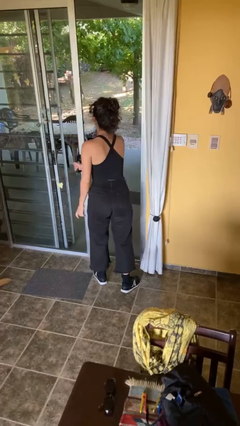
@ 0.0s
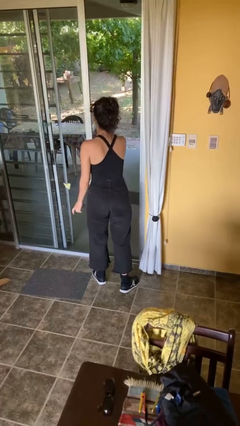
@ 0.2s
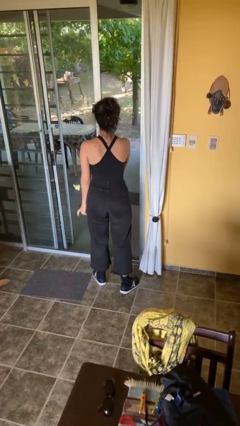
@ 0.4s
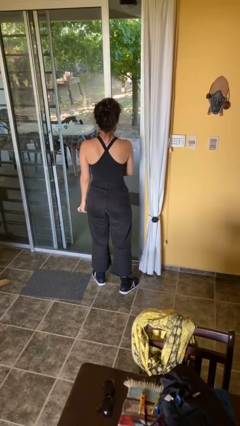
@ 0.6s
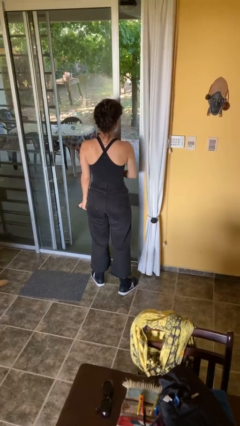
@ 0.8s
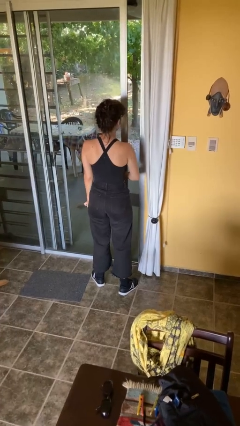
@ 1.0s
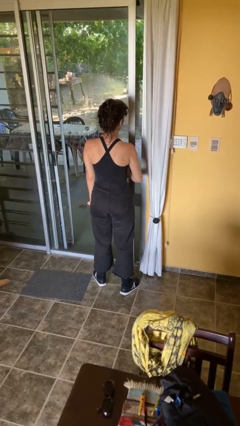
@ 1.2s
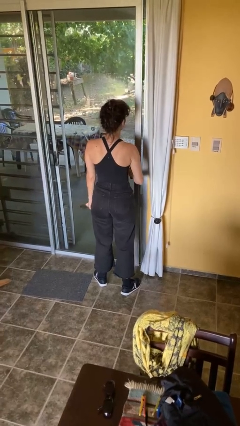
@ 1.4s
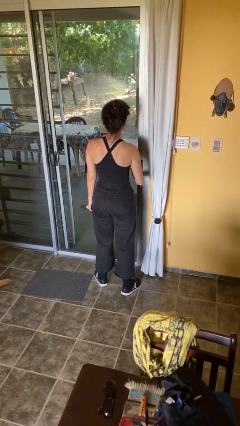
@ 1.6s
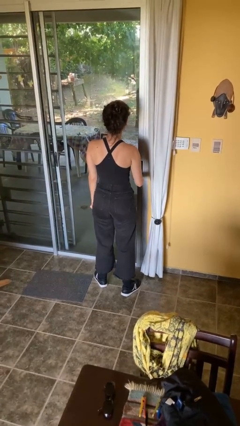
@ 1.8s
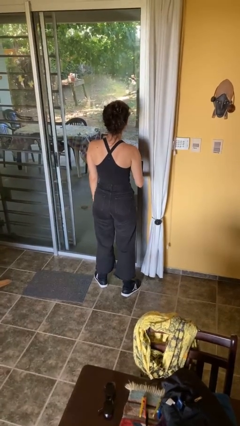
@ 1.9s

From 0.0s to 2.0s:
person closes facility door

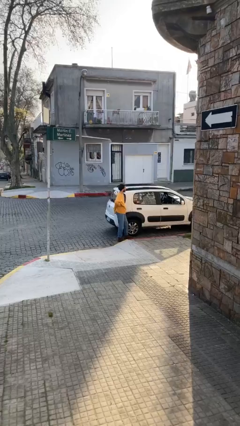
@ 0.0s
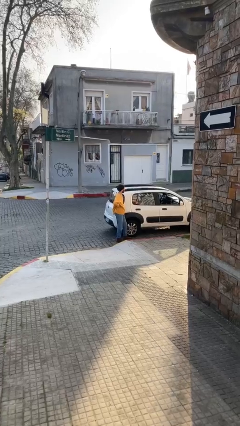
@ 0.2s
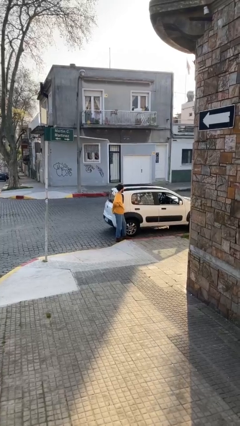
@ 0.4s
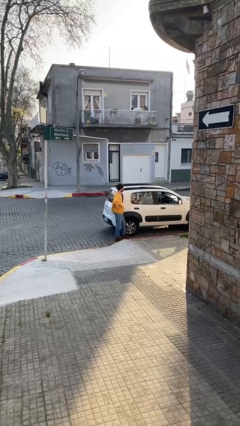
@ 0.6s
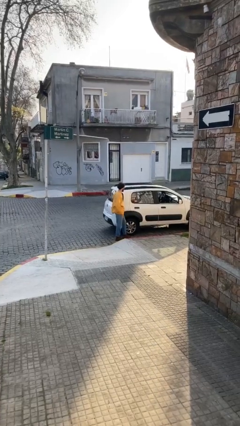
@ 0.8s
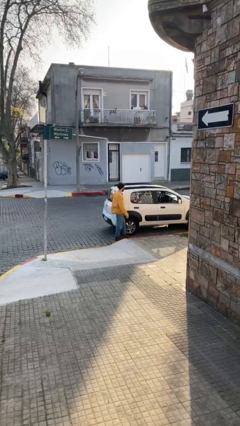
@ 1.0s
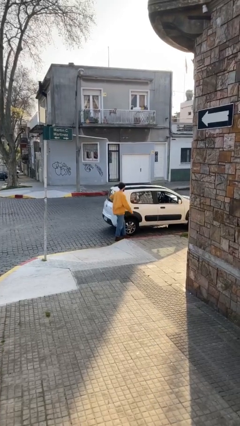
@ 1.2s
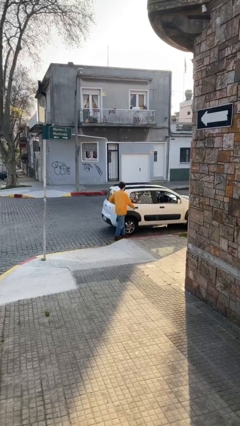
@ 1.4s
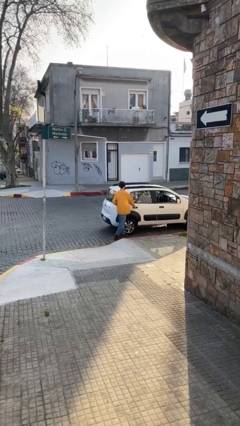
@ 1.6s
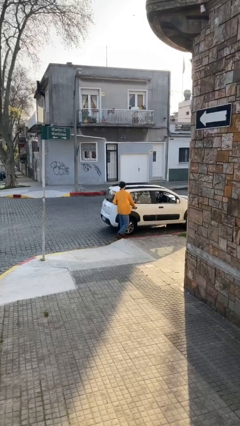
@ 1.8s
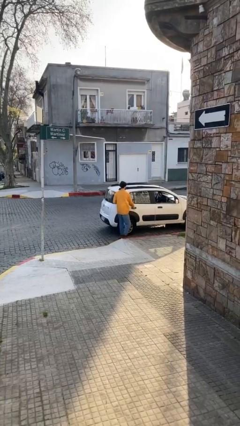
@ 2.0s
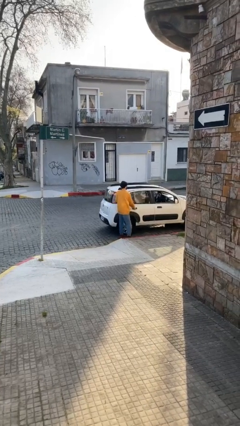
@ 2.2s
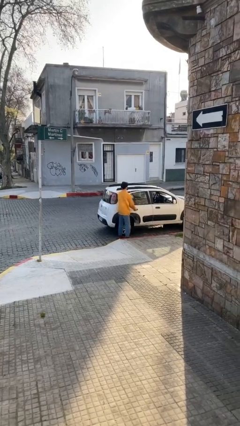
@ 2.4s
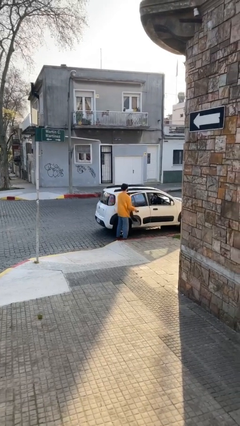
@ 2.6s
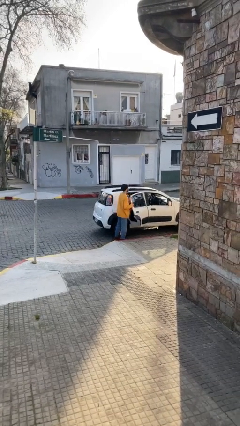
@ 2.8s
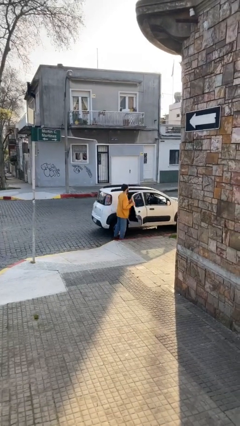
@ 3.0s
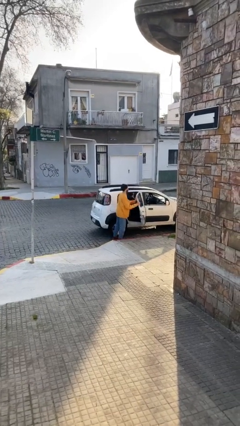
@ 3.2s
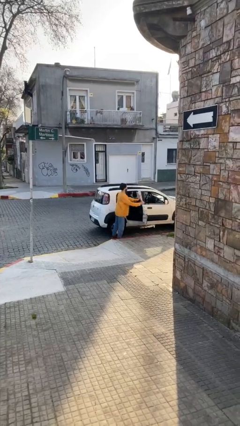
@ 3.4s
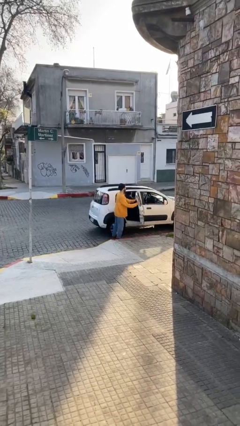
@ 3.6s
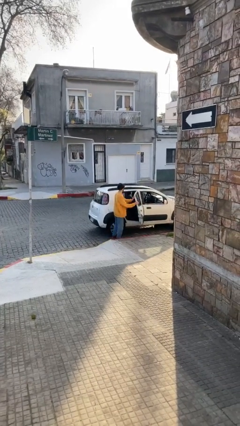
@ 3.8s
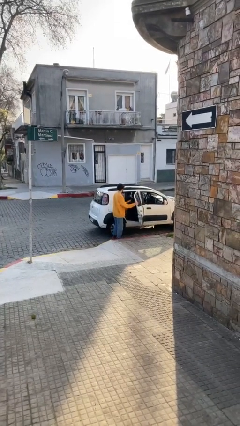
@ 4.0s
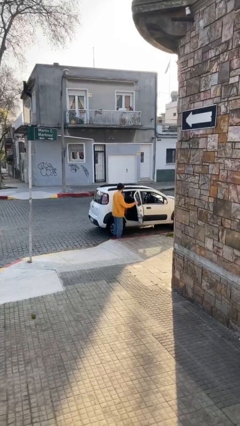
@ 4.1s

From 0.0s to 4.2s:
person opens car door

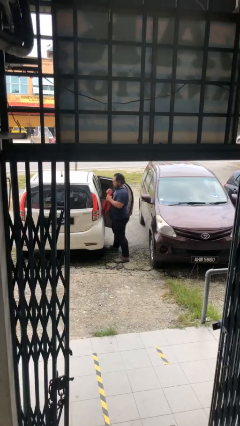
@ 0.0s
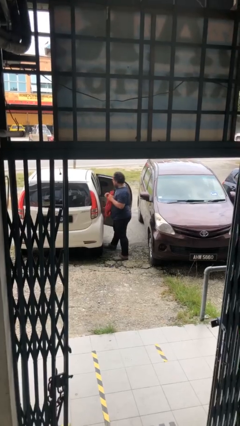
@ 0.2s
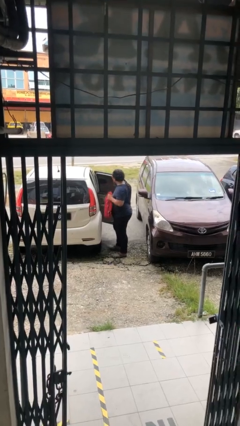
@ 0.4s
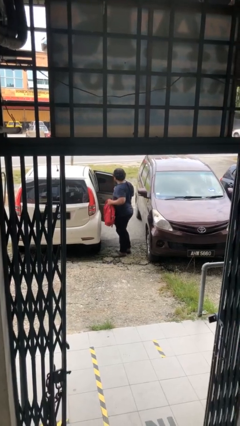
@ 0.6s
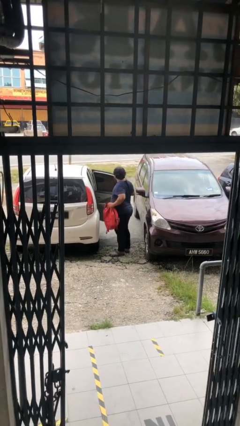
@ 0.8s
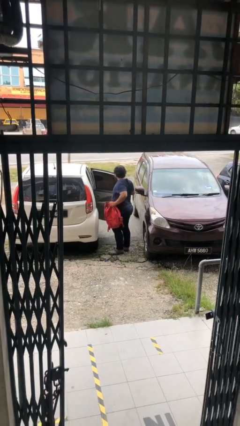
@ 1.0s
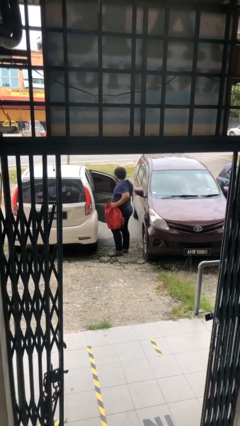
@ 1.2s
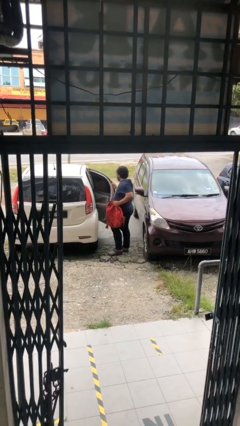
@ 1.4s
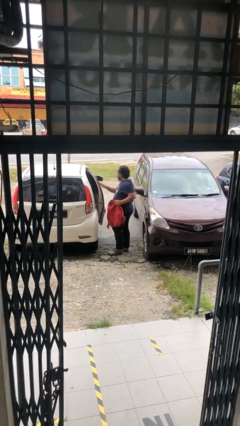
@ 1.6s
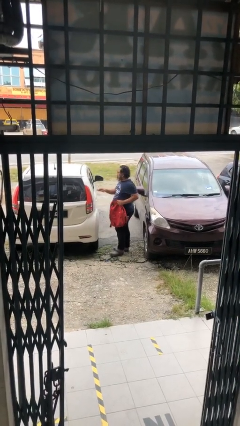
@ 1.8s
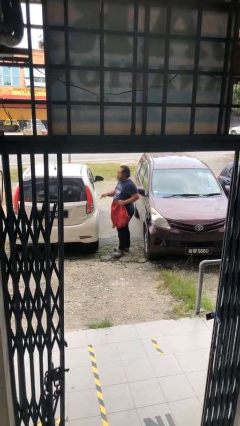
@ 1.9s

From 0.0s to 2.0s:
person closes car door

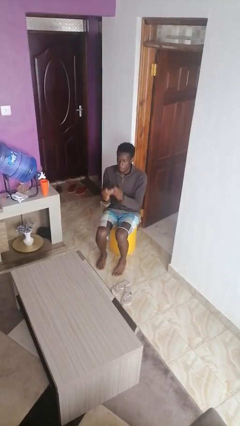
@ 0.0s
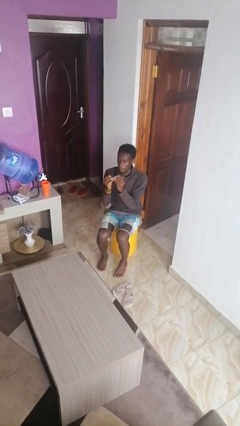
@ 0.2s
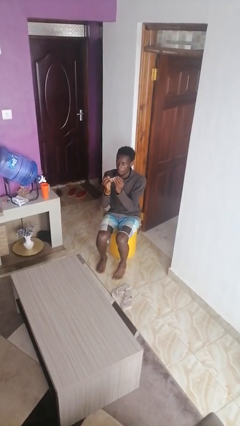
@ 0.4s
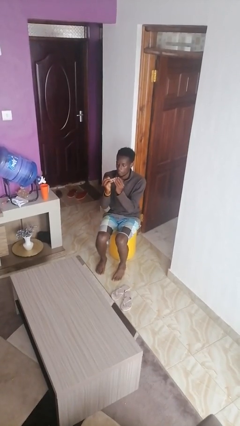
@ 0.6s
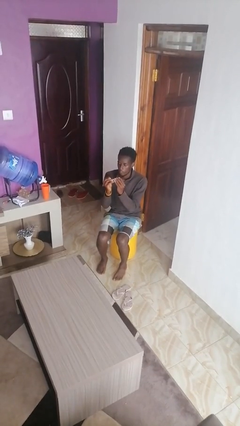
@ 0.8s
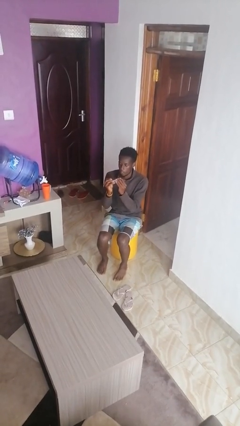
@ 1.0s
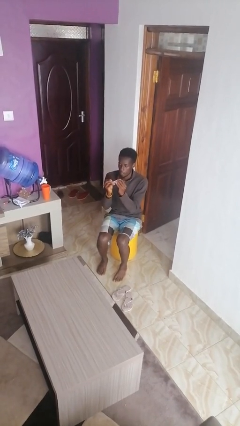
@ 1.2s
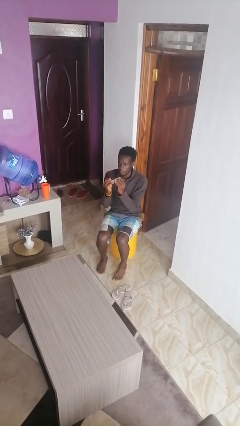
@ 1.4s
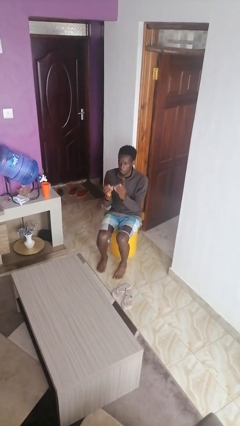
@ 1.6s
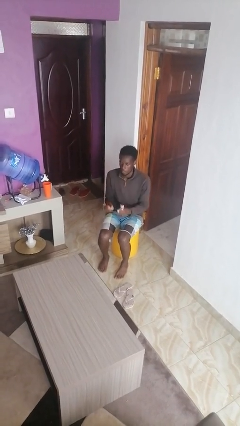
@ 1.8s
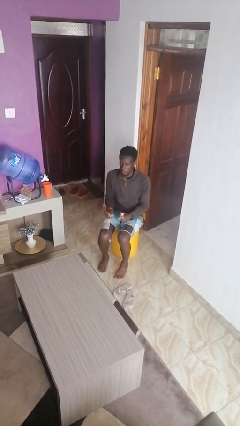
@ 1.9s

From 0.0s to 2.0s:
person clips fingernails

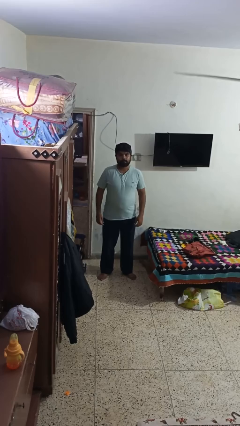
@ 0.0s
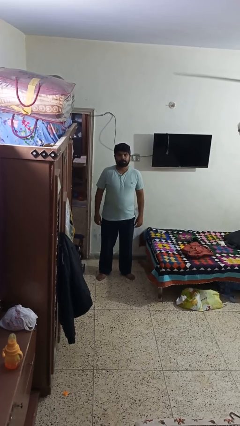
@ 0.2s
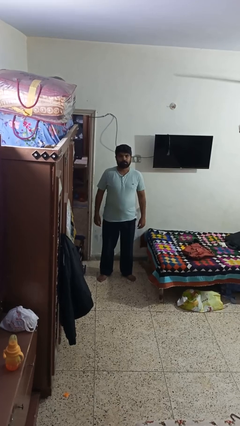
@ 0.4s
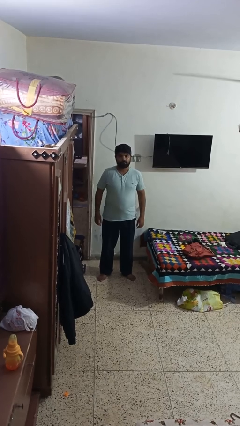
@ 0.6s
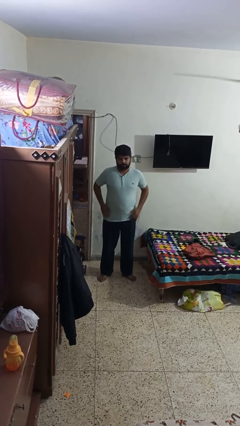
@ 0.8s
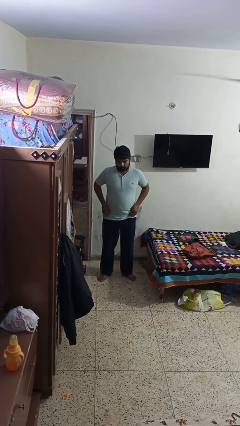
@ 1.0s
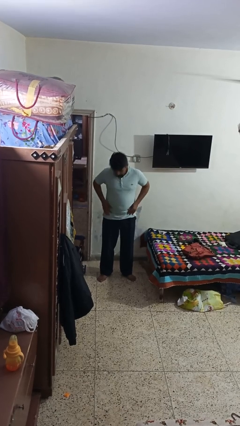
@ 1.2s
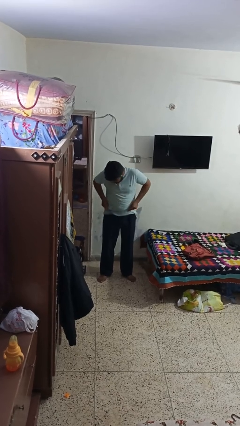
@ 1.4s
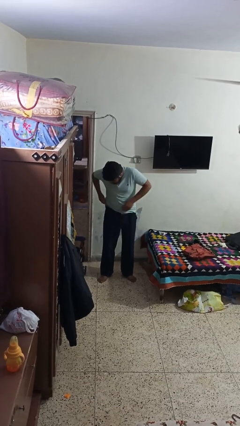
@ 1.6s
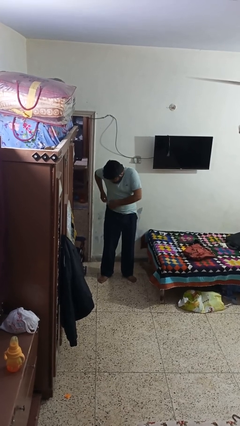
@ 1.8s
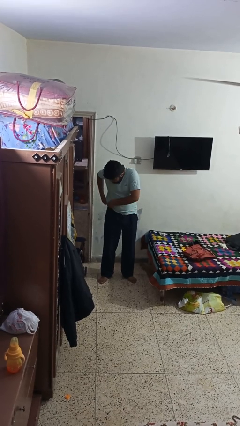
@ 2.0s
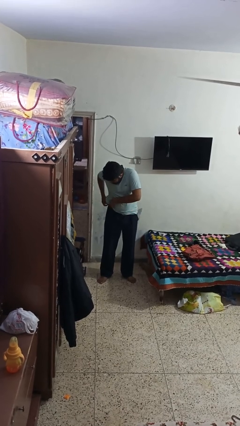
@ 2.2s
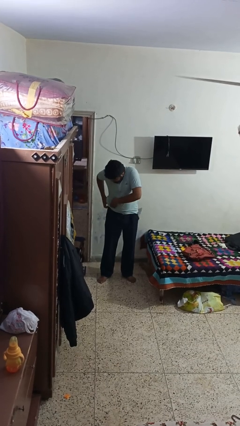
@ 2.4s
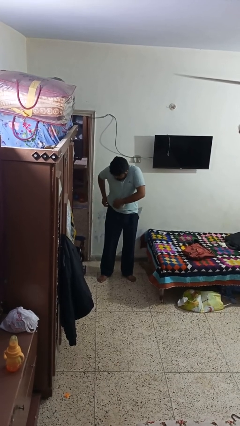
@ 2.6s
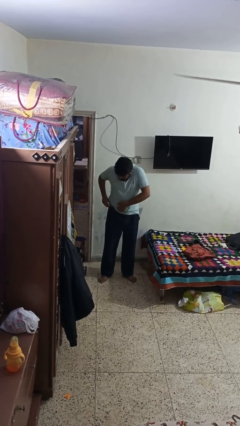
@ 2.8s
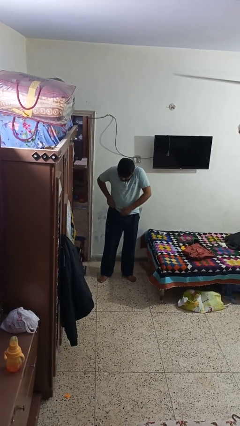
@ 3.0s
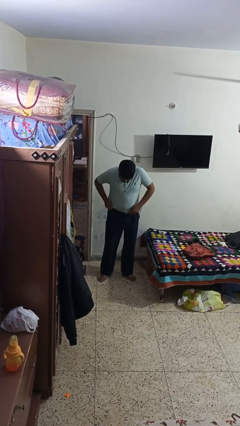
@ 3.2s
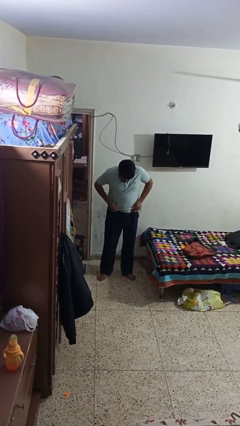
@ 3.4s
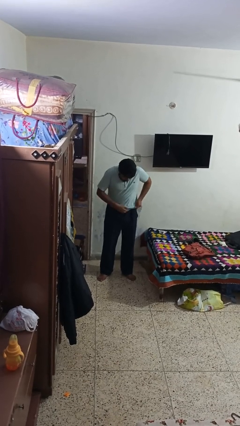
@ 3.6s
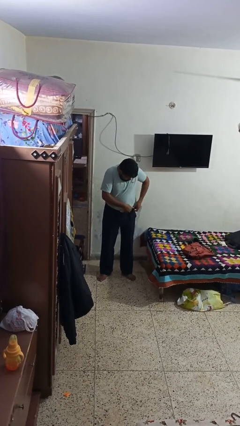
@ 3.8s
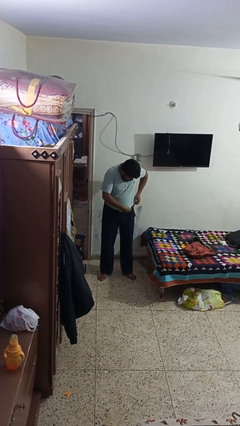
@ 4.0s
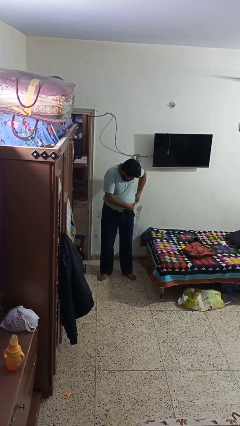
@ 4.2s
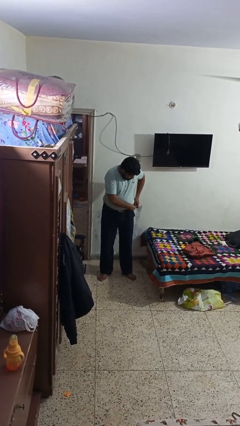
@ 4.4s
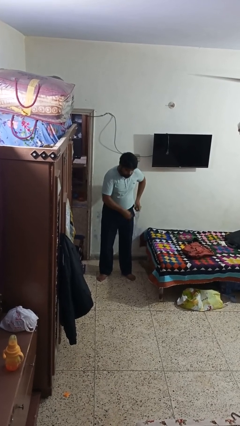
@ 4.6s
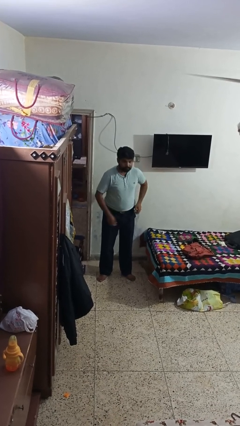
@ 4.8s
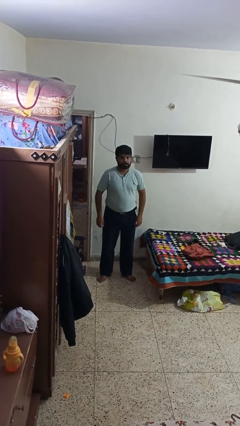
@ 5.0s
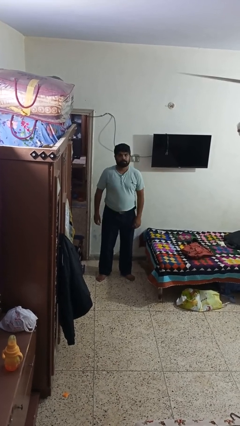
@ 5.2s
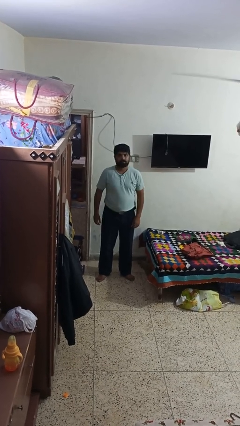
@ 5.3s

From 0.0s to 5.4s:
person tucks in shirt

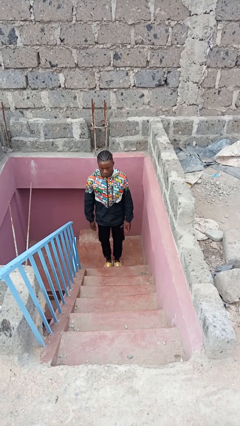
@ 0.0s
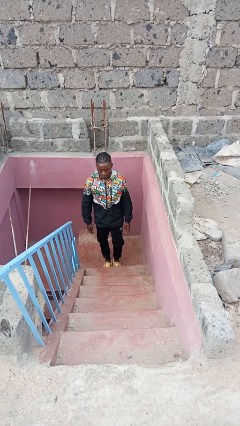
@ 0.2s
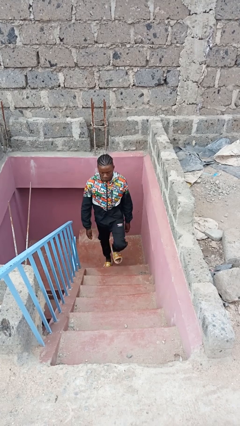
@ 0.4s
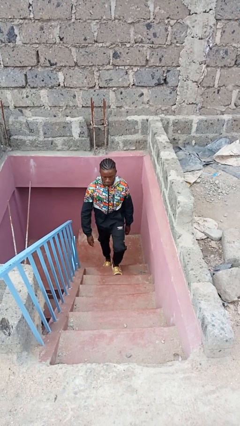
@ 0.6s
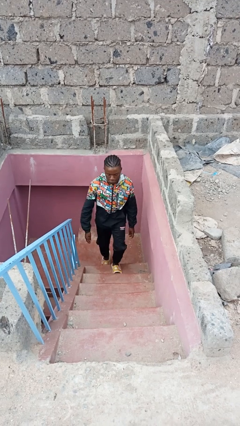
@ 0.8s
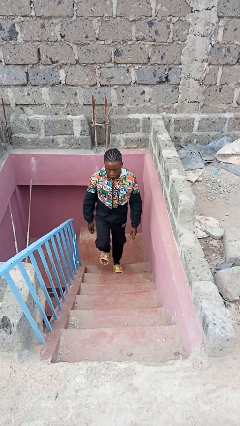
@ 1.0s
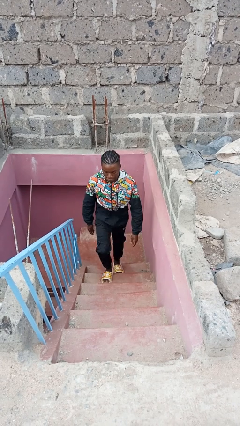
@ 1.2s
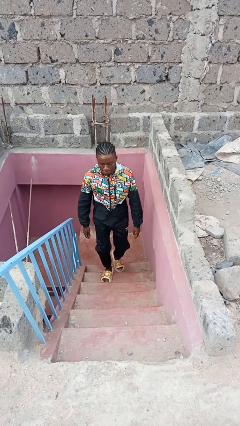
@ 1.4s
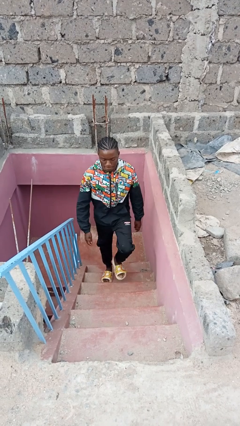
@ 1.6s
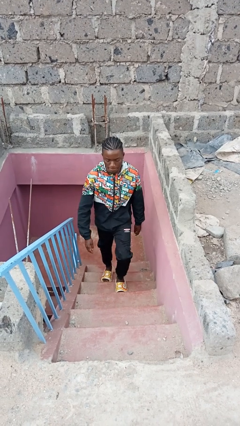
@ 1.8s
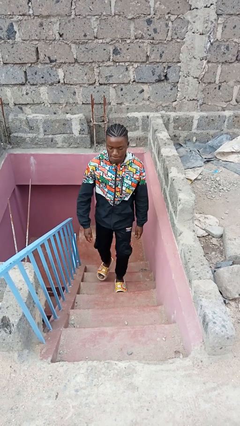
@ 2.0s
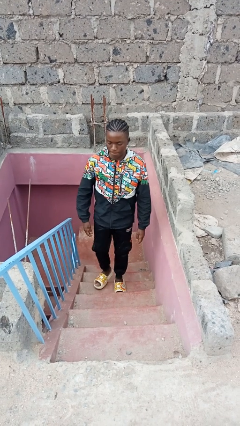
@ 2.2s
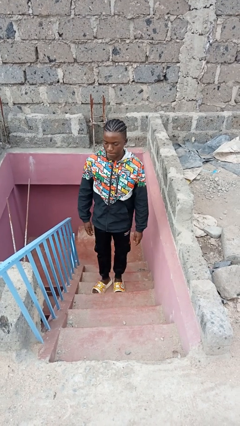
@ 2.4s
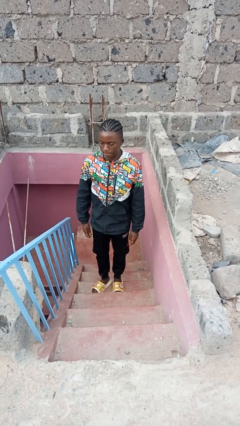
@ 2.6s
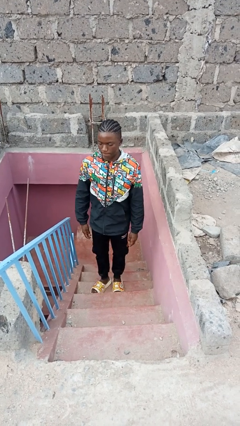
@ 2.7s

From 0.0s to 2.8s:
person climbs up stairs
